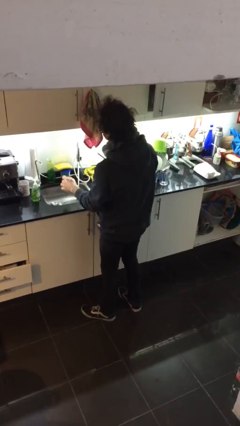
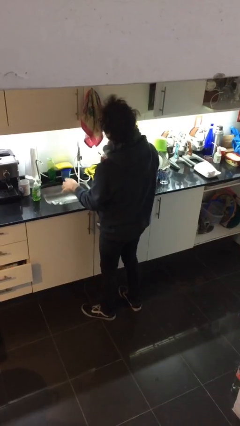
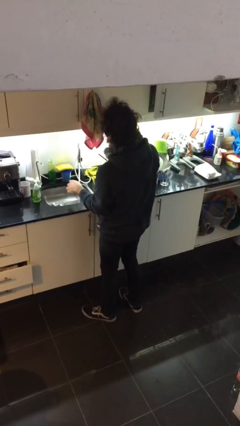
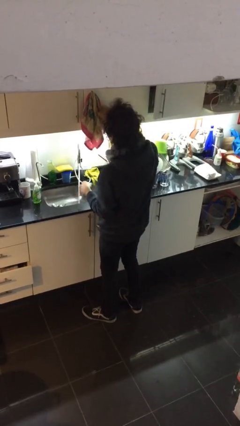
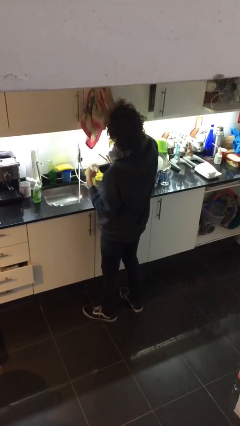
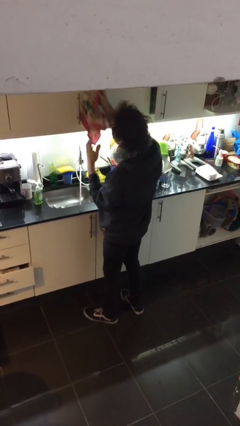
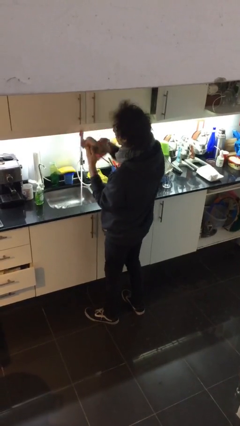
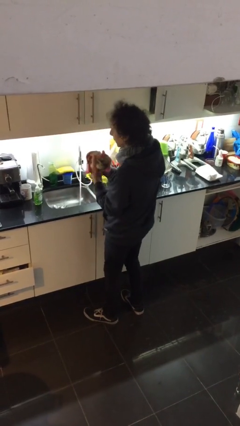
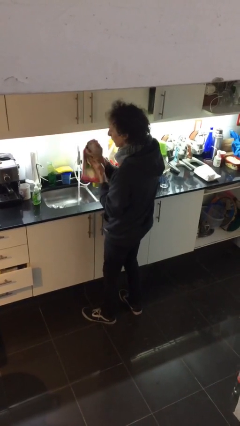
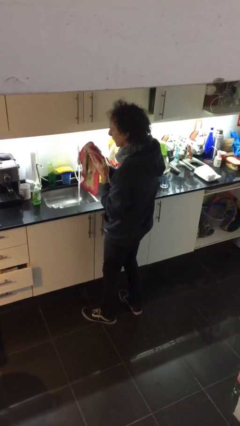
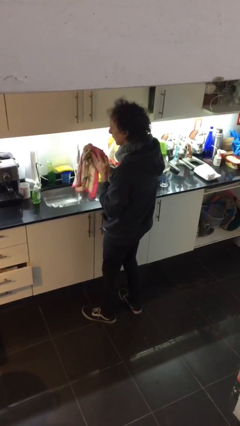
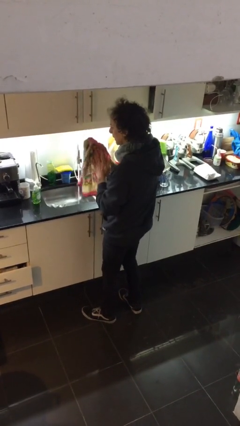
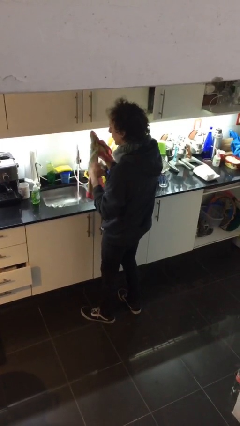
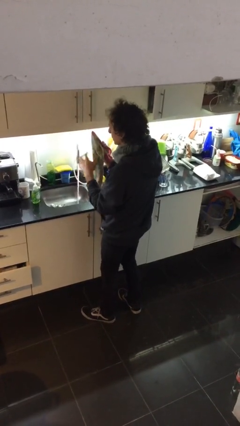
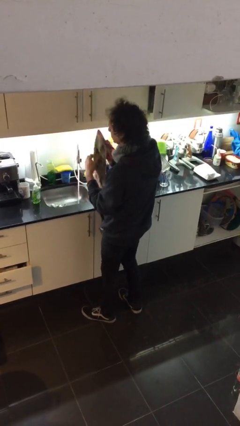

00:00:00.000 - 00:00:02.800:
person dries hands with towel

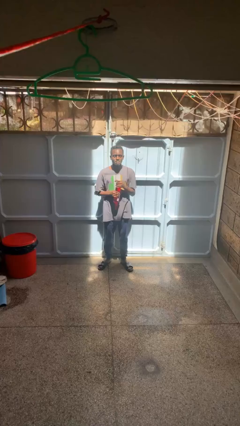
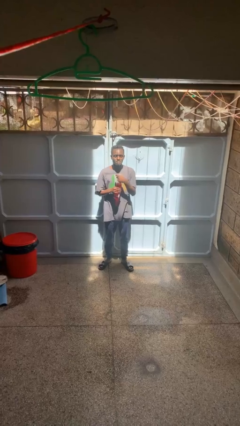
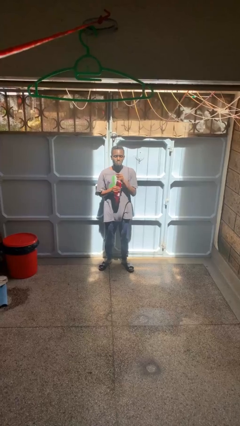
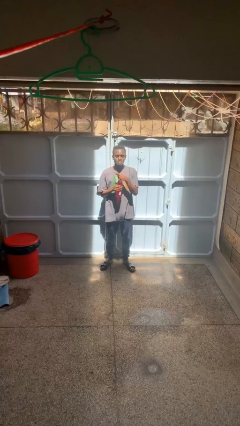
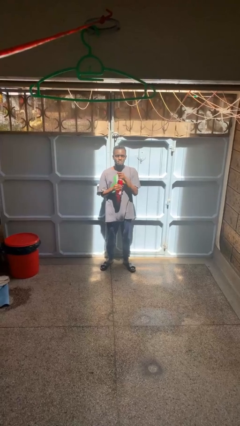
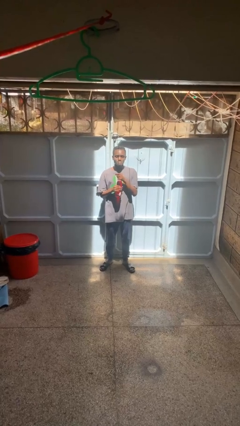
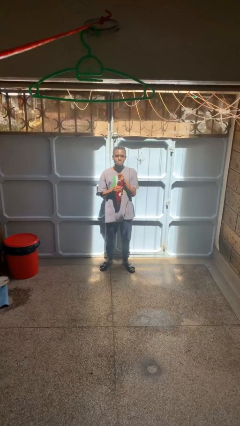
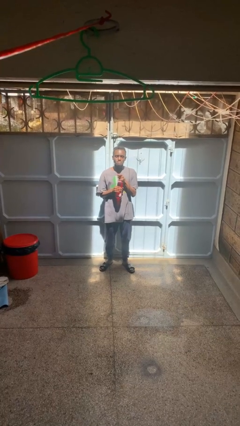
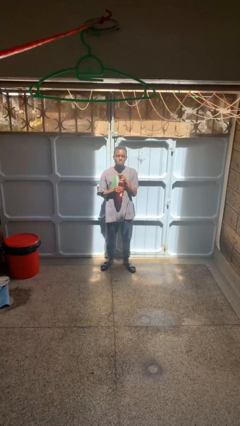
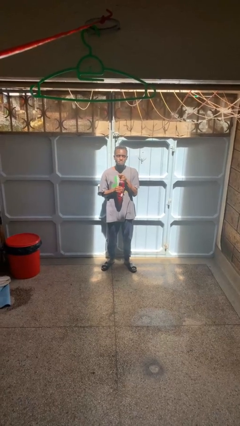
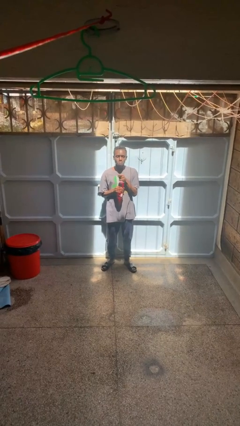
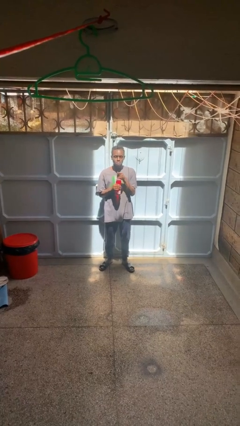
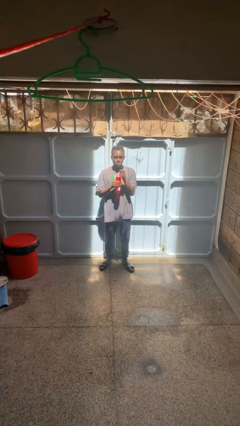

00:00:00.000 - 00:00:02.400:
person opens beverage can

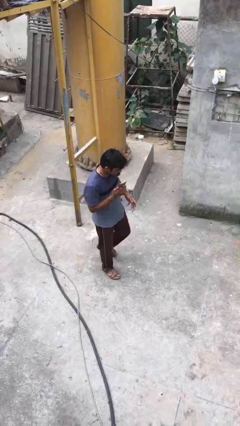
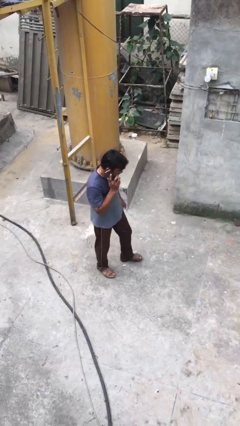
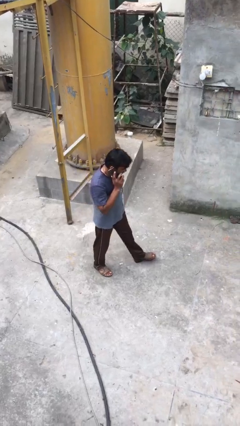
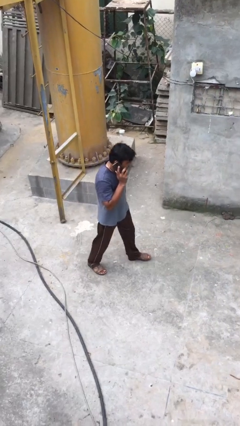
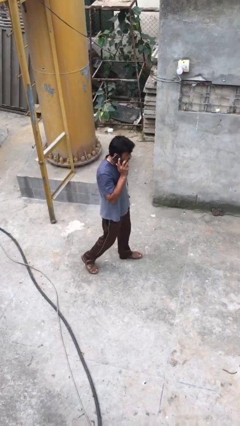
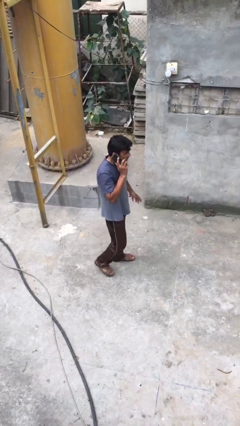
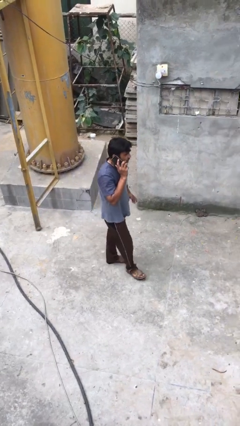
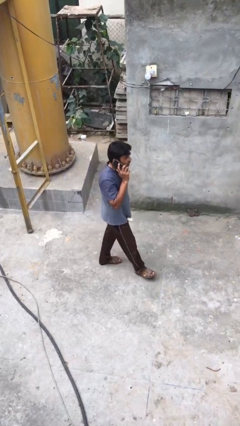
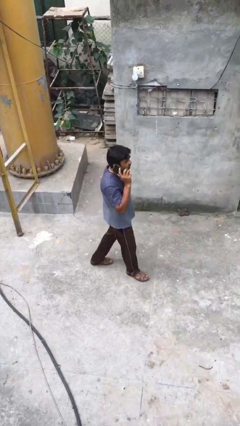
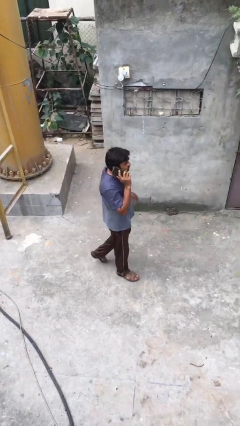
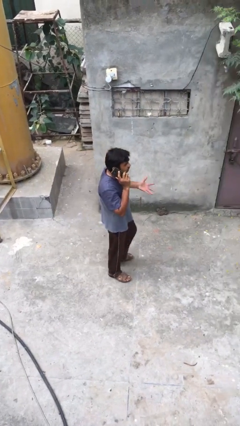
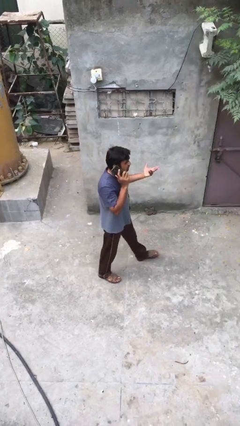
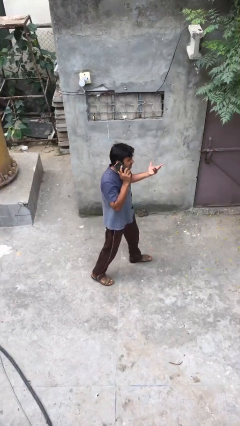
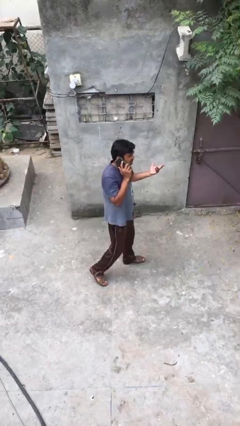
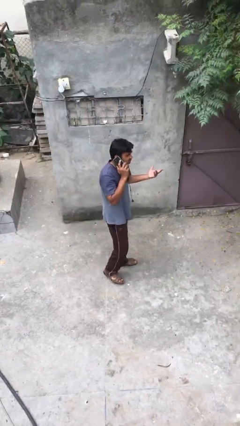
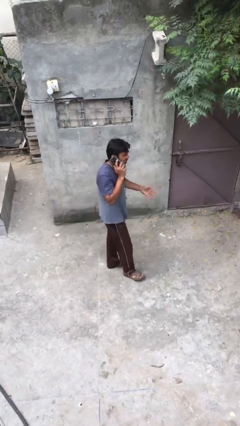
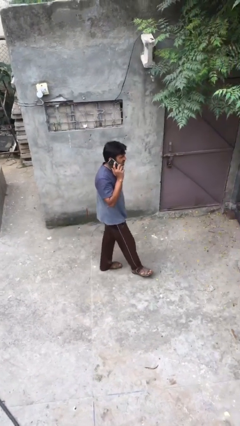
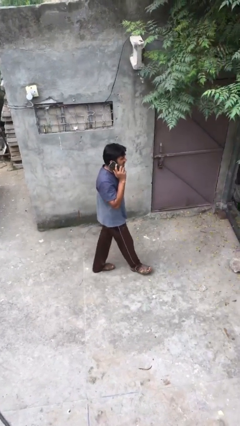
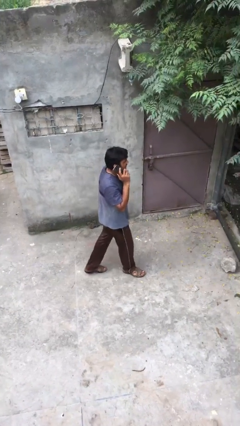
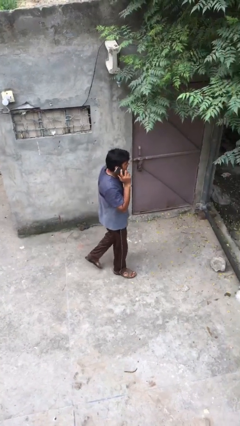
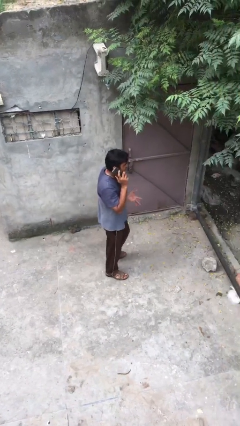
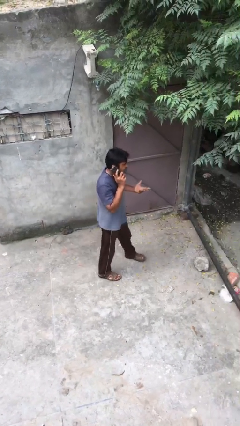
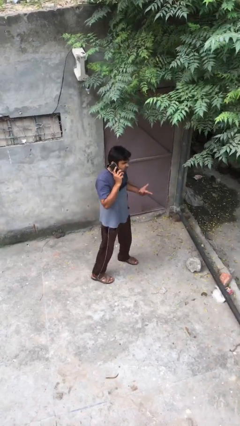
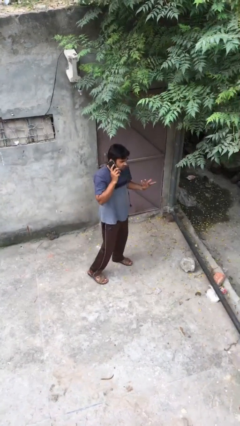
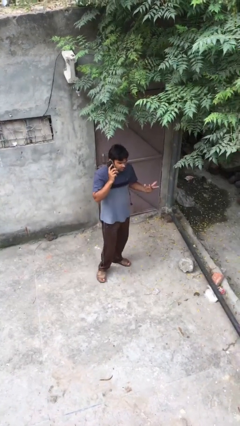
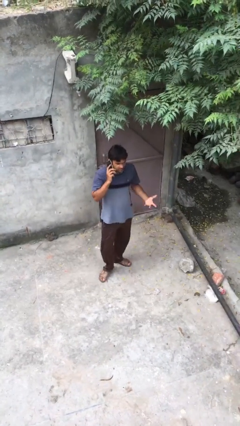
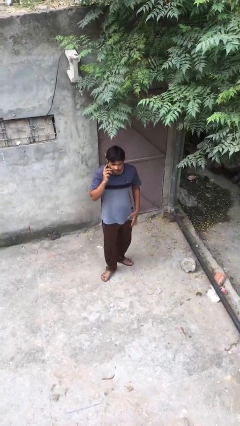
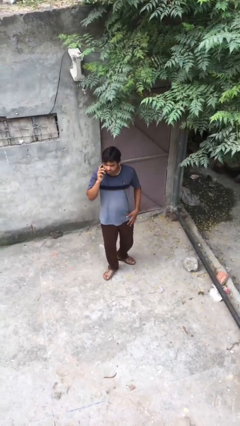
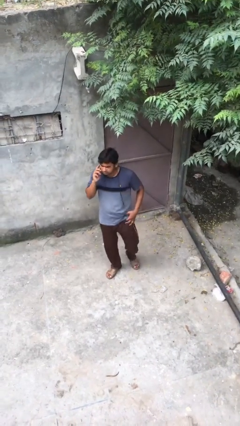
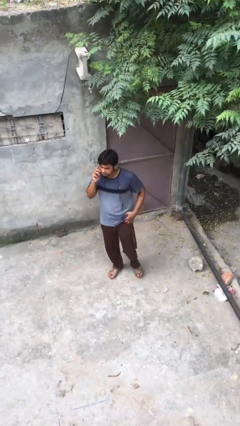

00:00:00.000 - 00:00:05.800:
person talks on phone

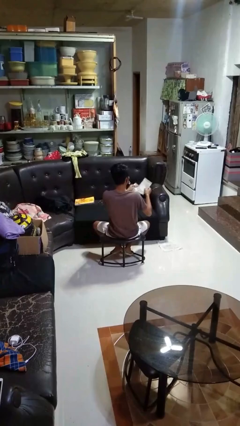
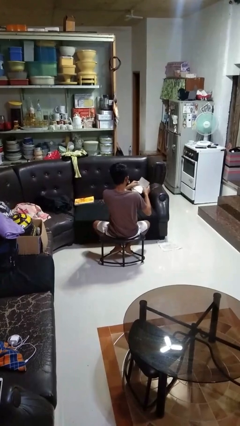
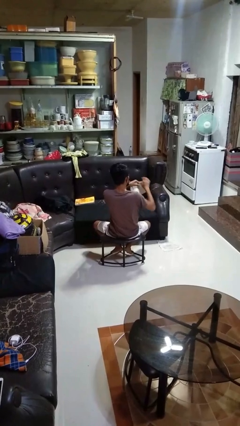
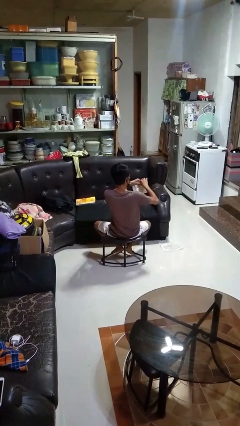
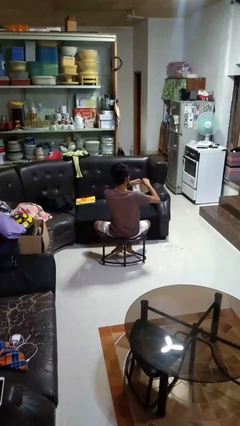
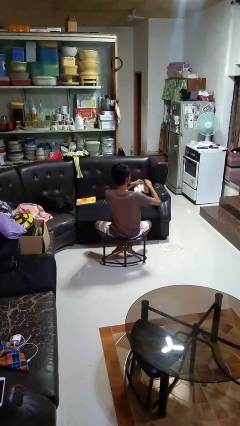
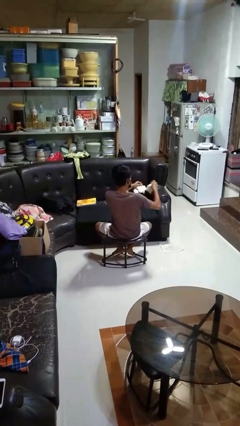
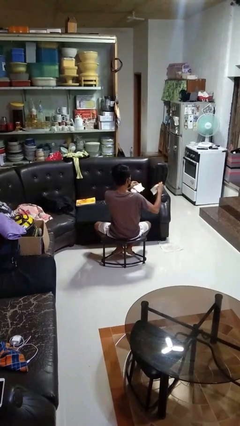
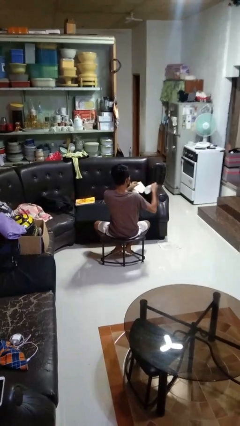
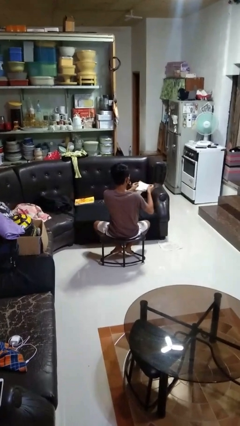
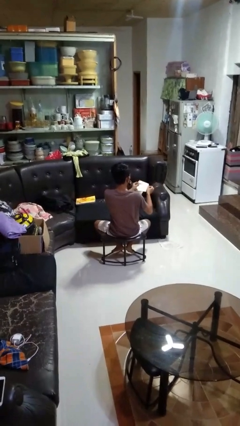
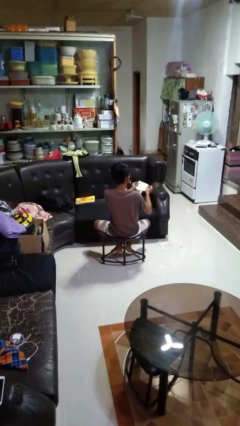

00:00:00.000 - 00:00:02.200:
person tears paper

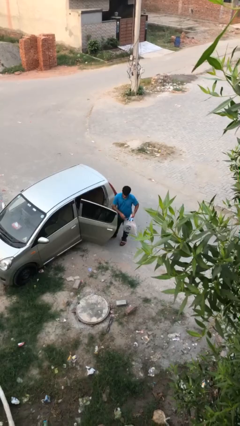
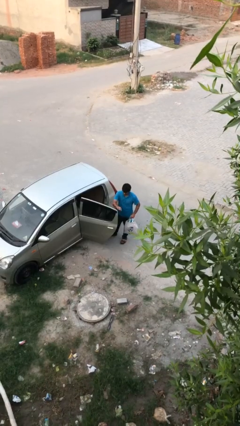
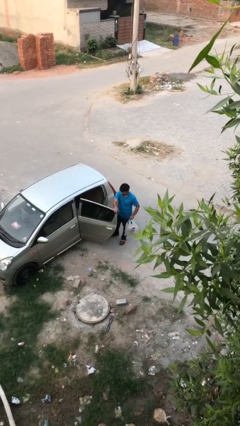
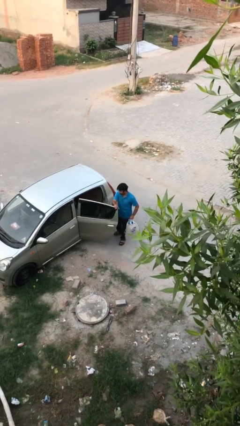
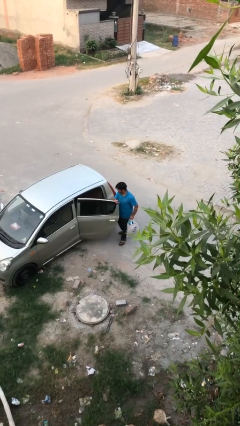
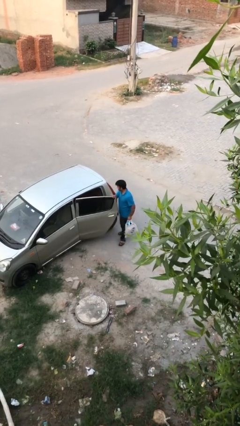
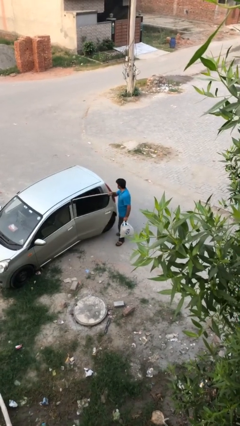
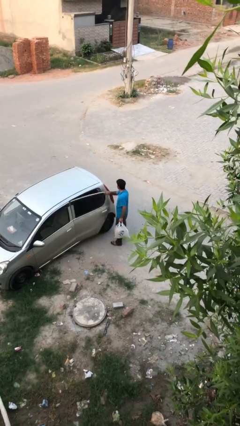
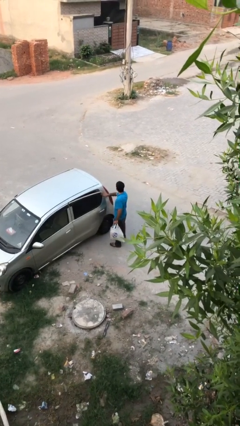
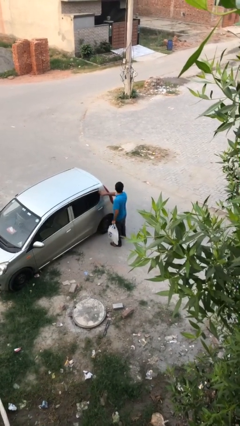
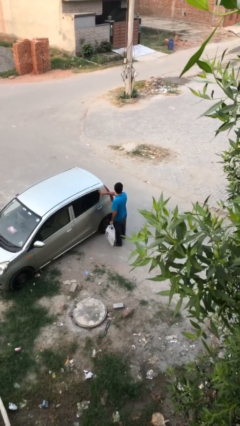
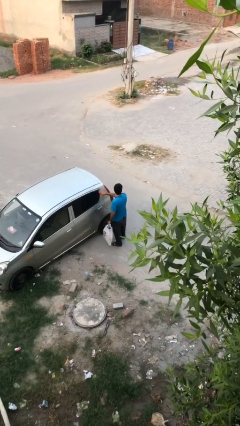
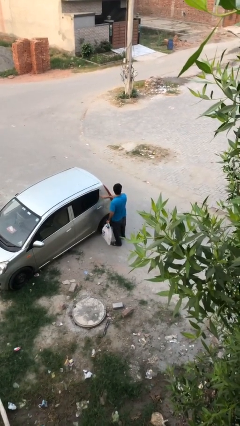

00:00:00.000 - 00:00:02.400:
person closes car door

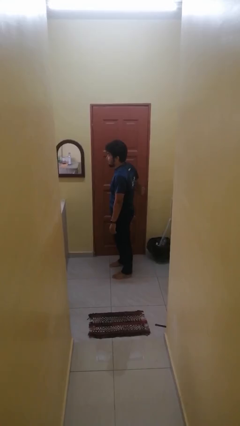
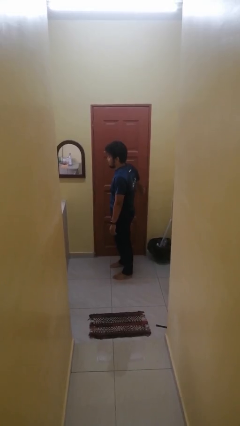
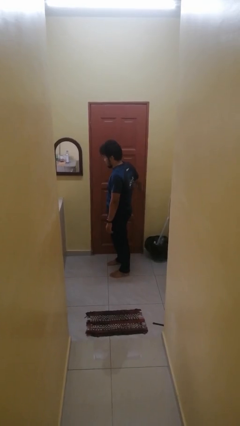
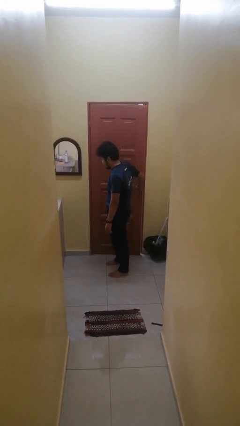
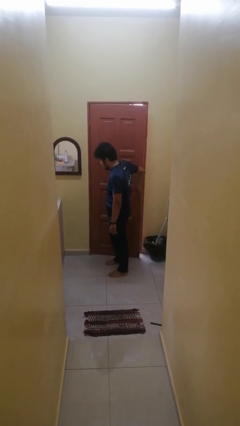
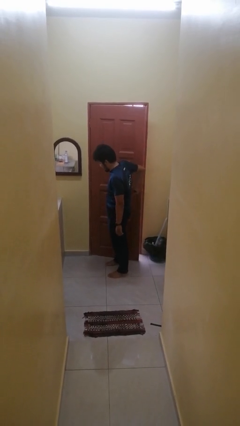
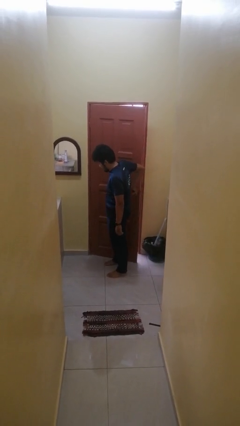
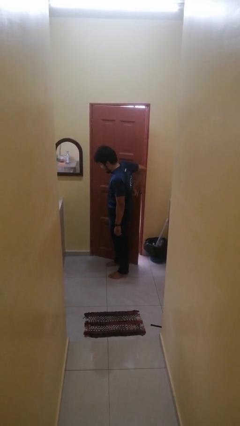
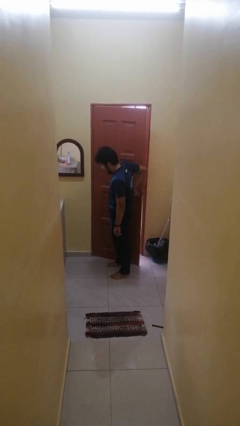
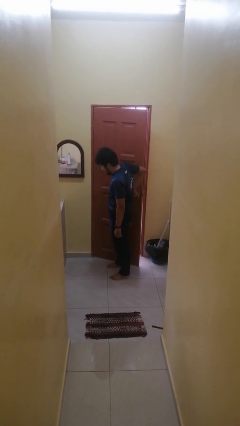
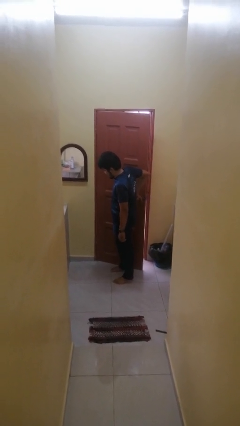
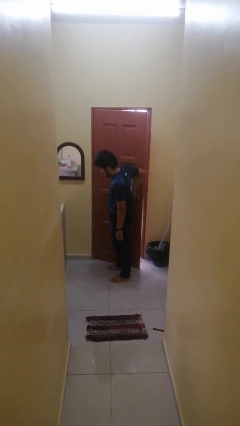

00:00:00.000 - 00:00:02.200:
person opens facility door
